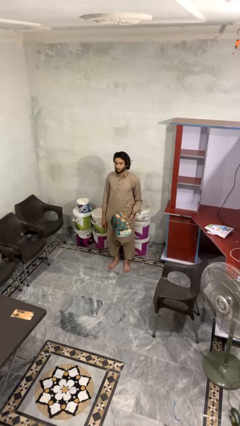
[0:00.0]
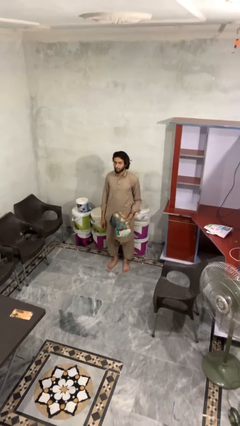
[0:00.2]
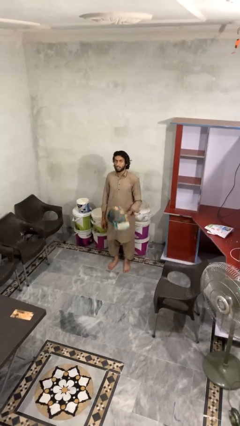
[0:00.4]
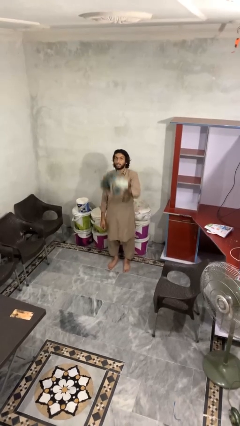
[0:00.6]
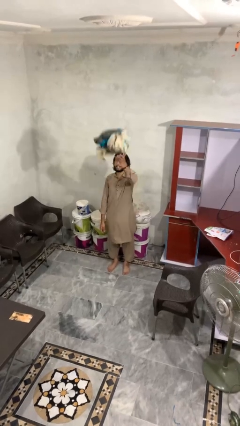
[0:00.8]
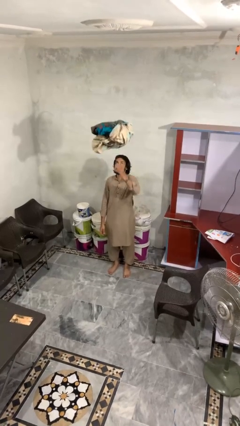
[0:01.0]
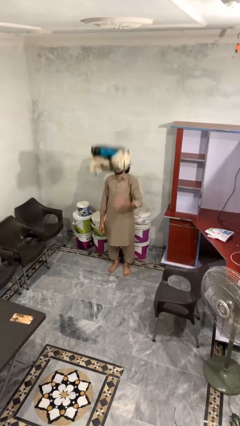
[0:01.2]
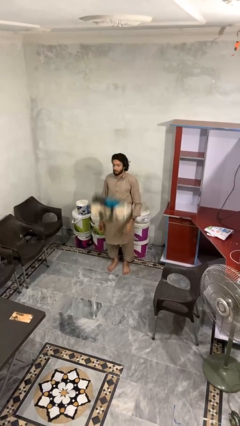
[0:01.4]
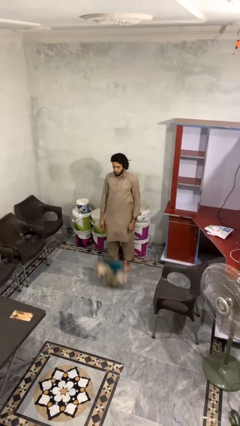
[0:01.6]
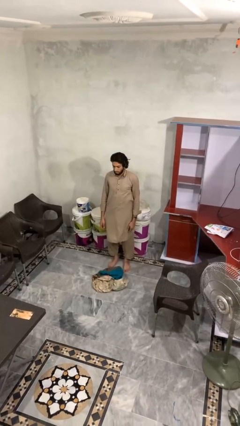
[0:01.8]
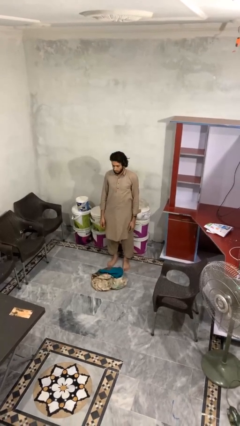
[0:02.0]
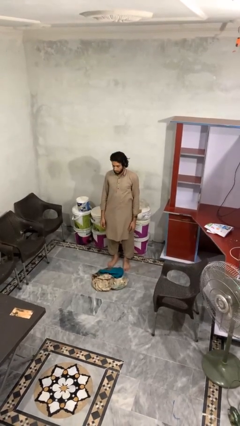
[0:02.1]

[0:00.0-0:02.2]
person throws object into air

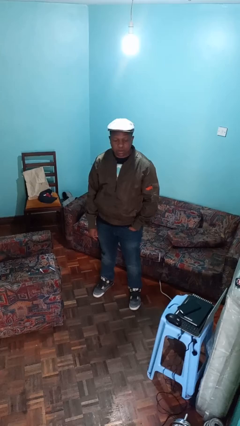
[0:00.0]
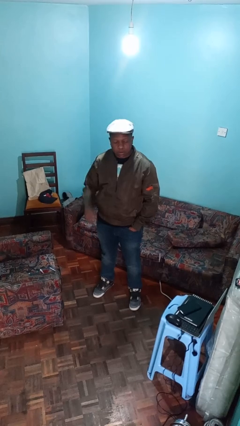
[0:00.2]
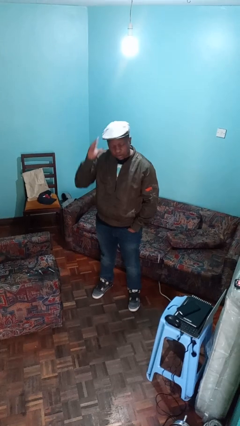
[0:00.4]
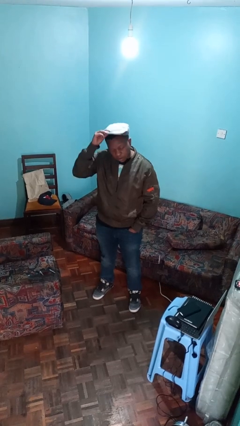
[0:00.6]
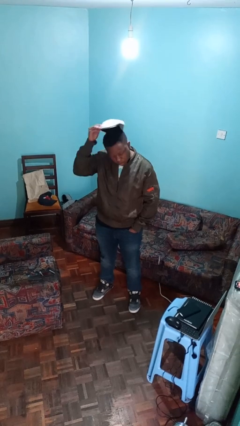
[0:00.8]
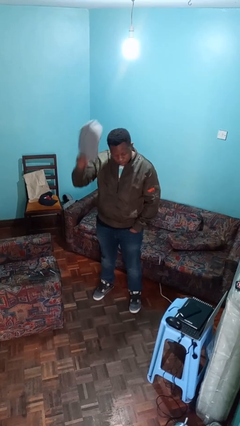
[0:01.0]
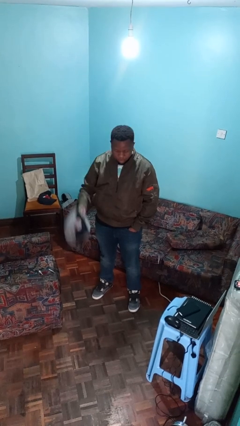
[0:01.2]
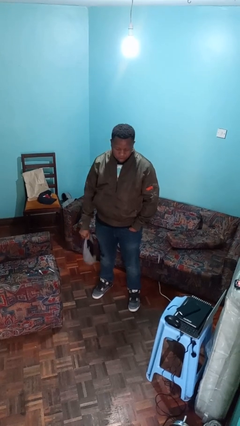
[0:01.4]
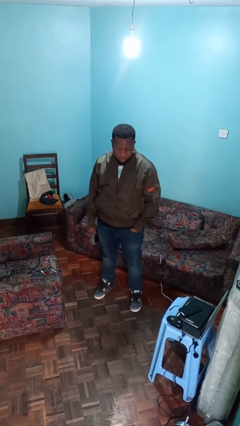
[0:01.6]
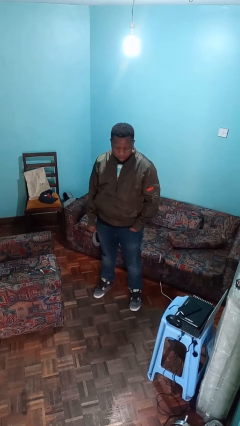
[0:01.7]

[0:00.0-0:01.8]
person takes off hat

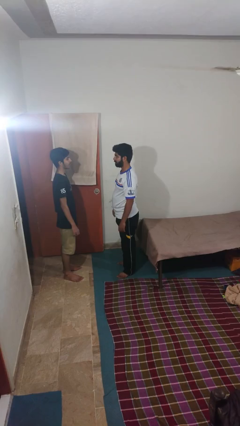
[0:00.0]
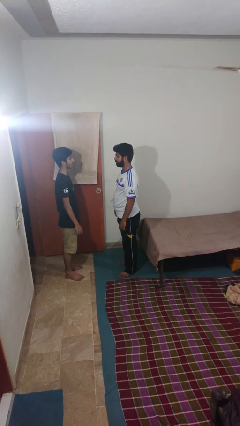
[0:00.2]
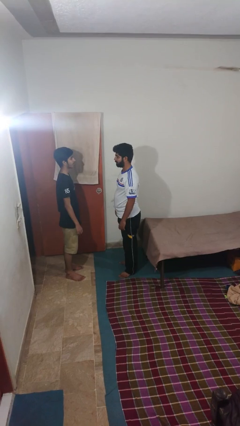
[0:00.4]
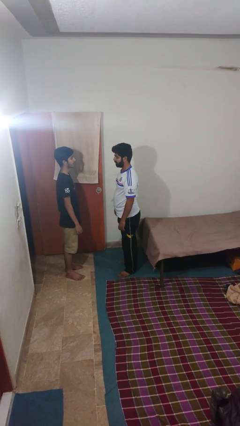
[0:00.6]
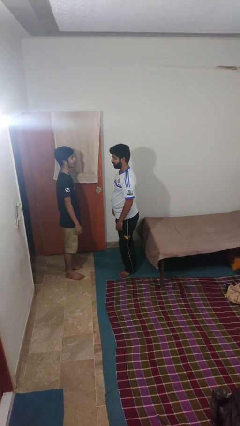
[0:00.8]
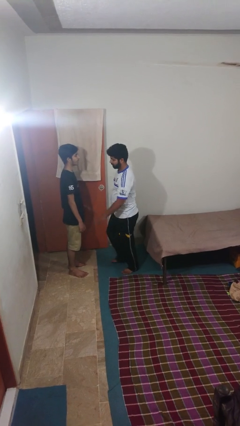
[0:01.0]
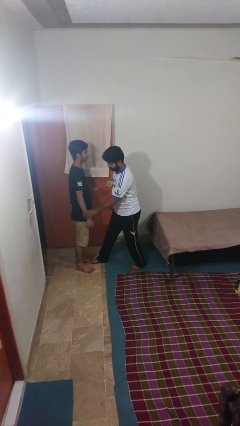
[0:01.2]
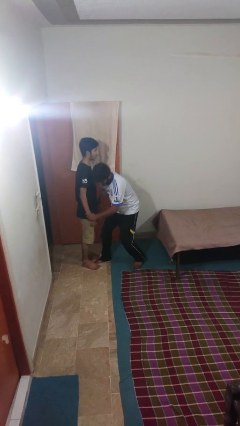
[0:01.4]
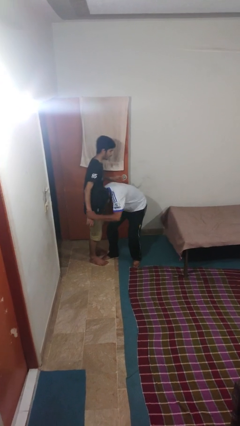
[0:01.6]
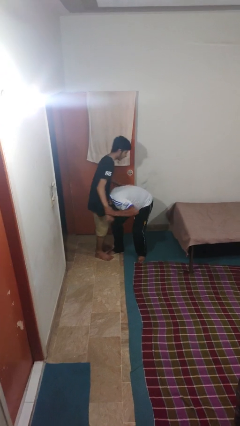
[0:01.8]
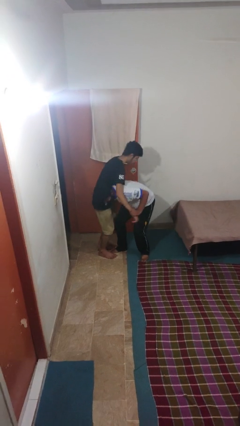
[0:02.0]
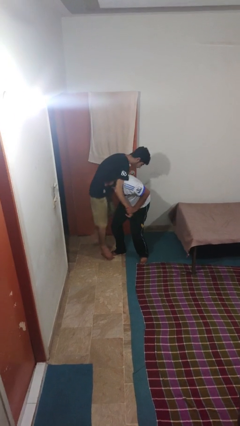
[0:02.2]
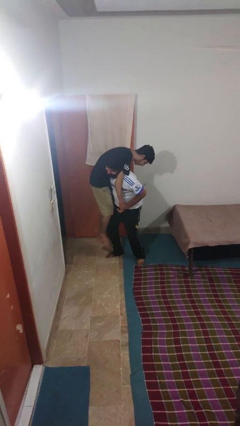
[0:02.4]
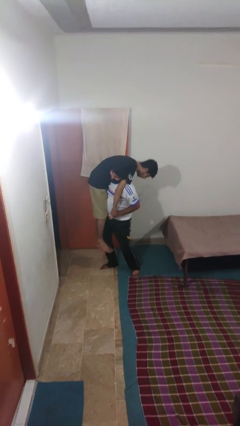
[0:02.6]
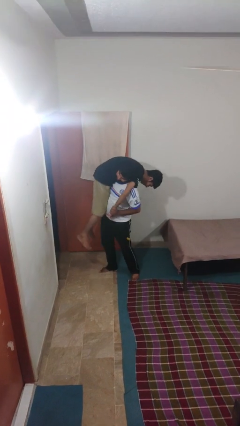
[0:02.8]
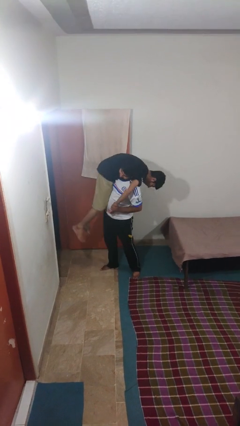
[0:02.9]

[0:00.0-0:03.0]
person carries person over shoulder

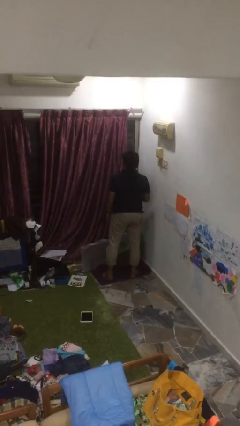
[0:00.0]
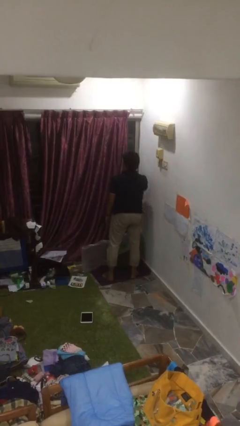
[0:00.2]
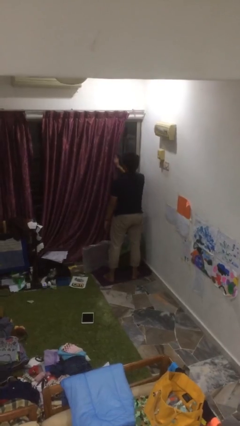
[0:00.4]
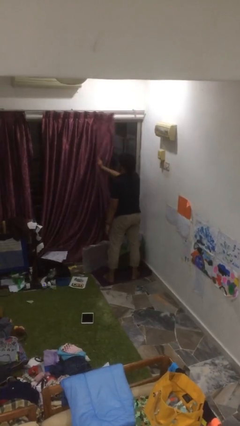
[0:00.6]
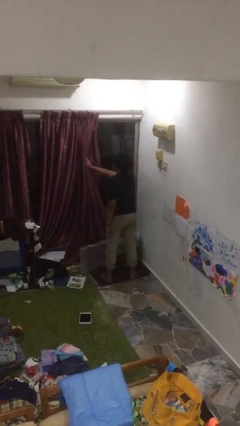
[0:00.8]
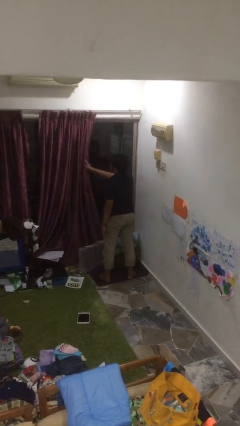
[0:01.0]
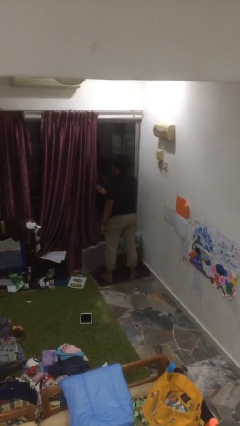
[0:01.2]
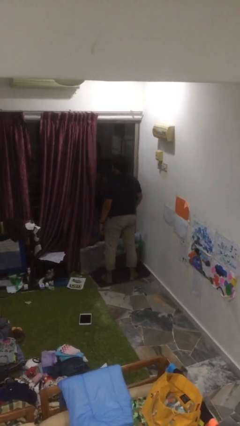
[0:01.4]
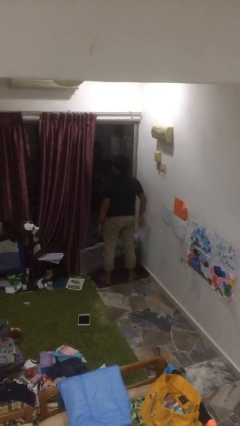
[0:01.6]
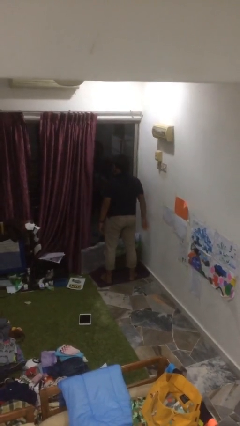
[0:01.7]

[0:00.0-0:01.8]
person opens curtains

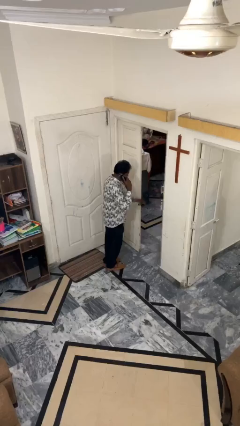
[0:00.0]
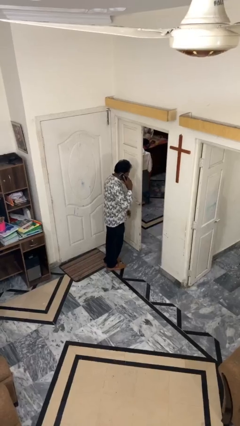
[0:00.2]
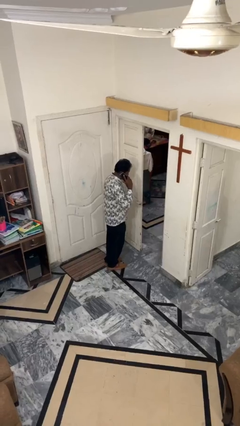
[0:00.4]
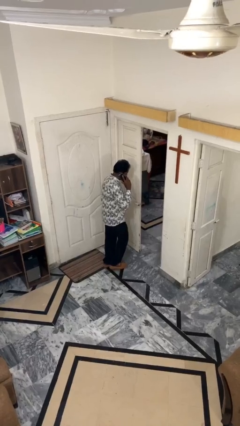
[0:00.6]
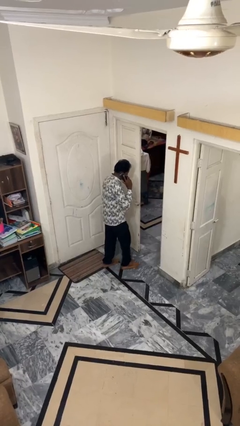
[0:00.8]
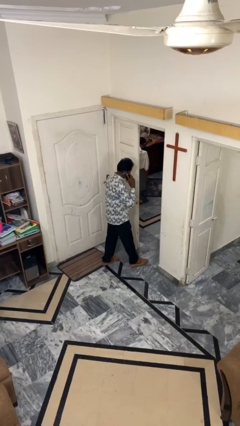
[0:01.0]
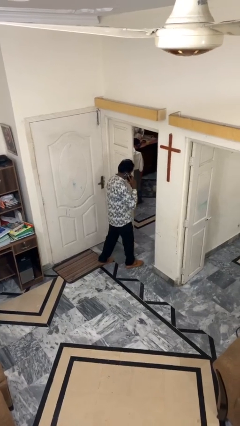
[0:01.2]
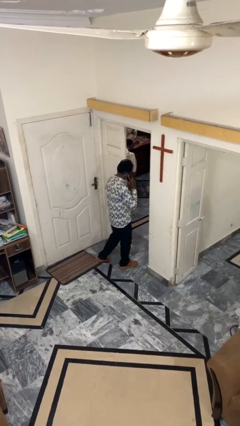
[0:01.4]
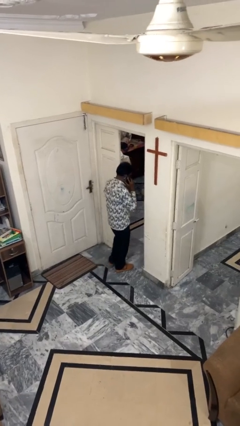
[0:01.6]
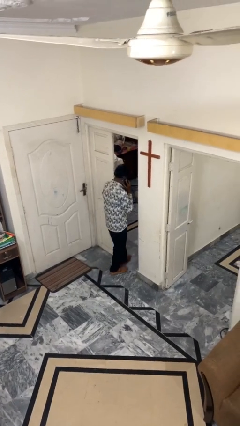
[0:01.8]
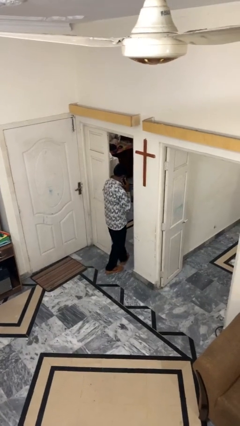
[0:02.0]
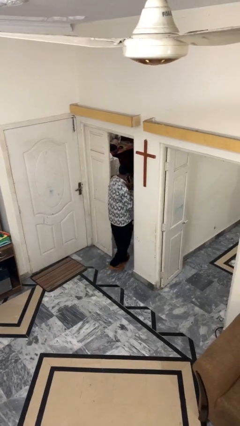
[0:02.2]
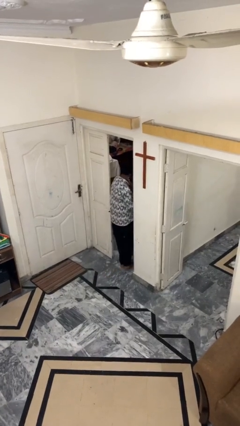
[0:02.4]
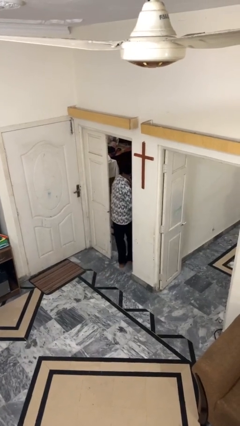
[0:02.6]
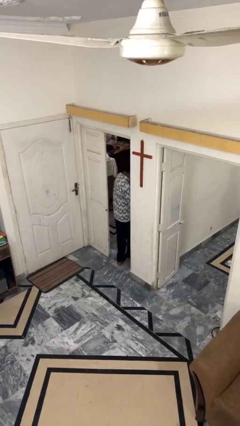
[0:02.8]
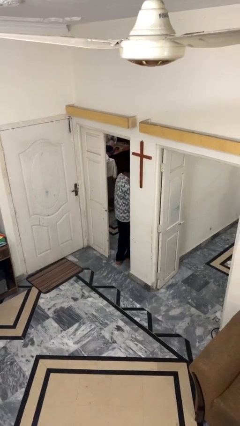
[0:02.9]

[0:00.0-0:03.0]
person exits scene through structure

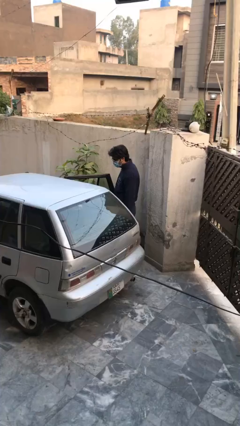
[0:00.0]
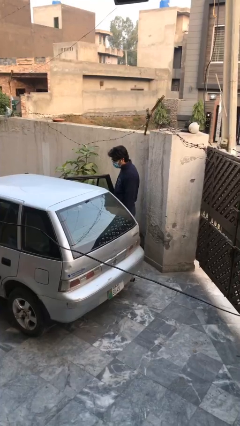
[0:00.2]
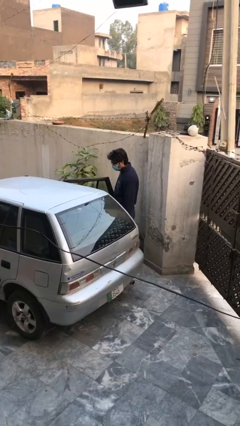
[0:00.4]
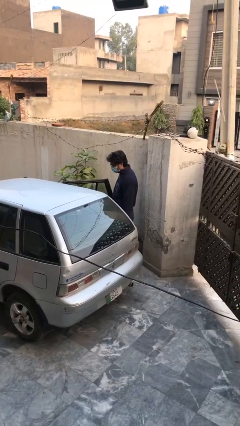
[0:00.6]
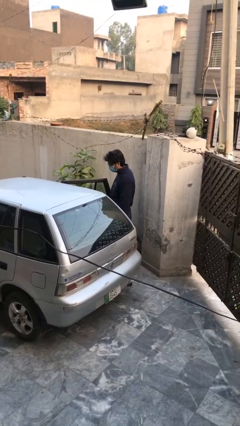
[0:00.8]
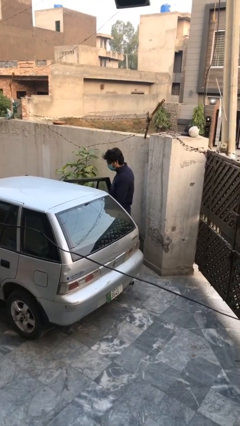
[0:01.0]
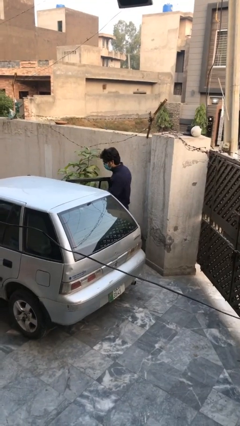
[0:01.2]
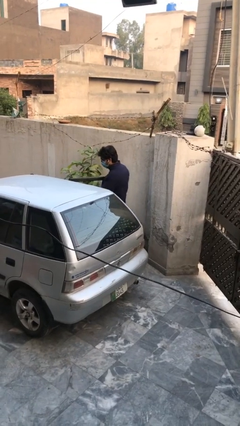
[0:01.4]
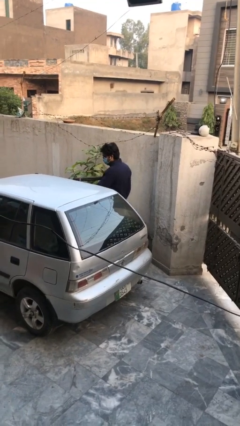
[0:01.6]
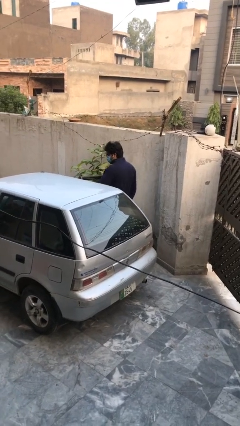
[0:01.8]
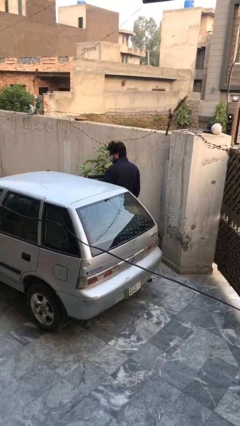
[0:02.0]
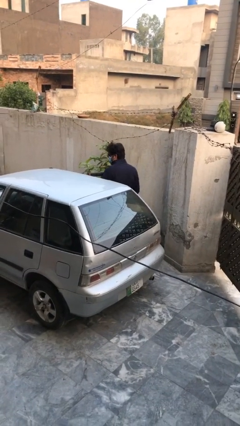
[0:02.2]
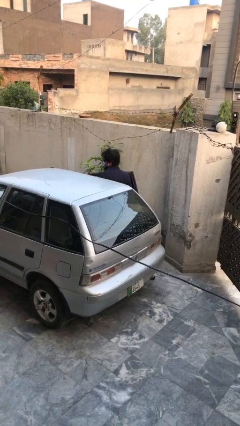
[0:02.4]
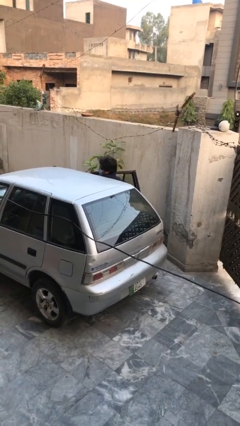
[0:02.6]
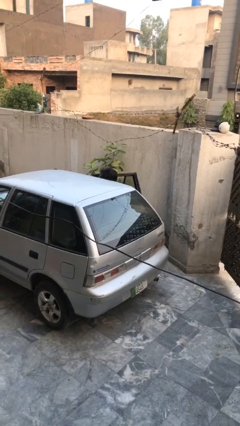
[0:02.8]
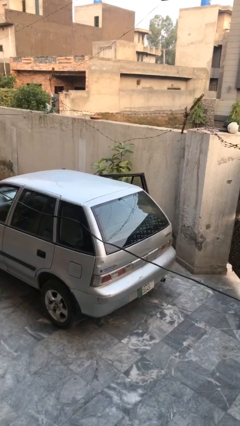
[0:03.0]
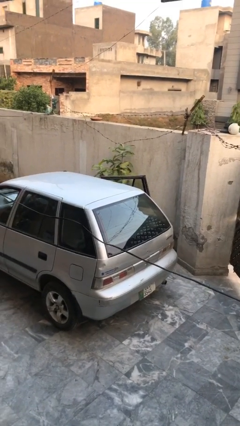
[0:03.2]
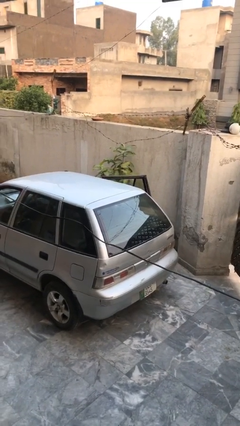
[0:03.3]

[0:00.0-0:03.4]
person enters car

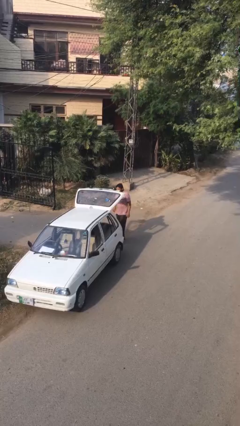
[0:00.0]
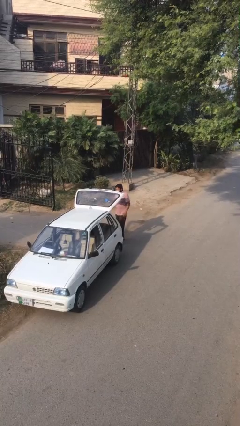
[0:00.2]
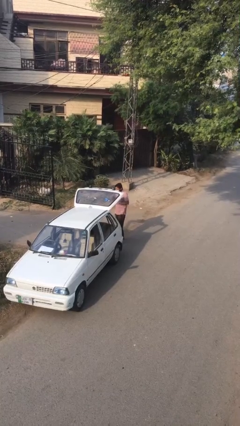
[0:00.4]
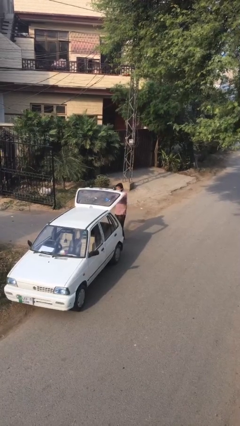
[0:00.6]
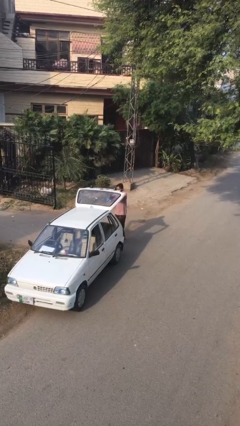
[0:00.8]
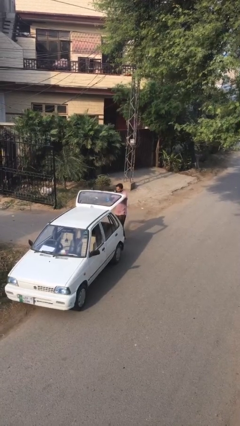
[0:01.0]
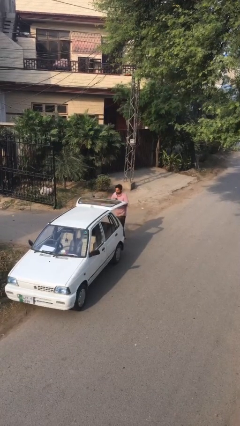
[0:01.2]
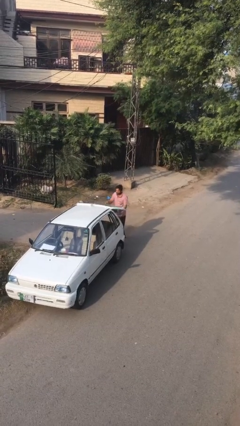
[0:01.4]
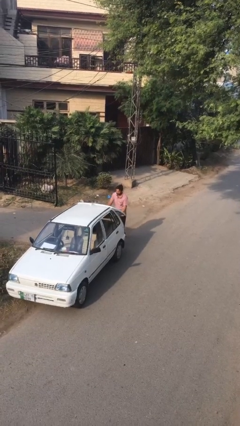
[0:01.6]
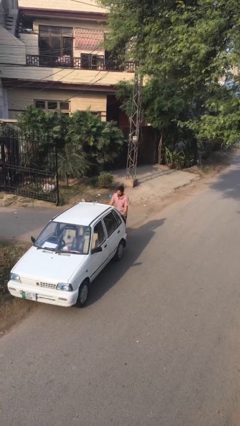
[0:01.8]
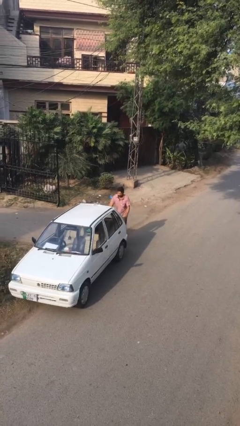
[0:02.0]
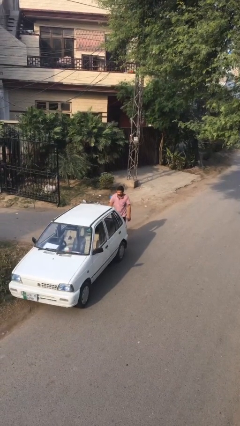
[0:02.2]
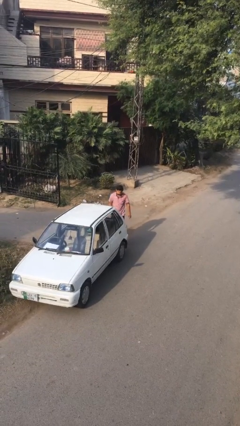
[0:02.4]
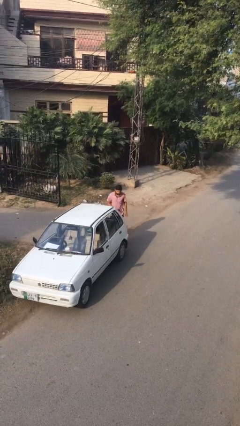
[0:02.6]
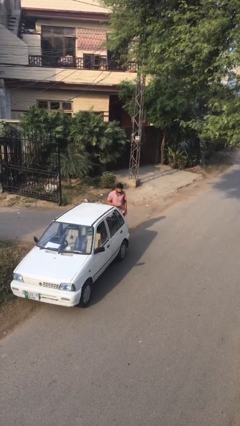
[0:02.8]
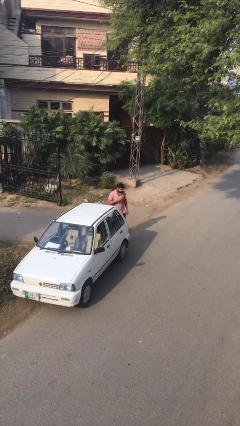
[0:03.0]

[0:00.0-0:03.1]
person closes car trunk
